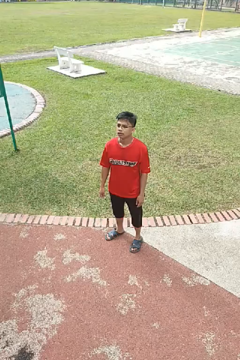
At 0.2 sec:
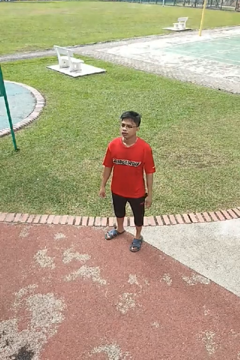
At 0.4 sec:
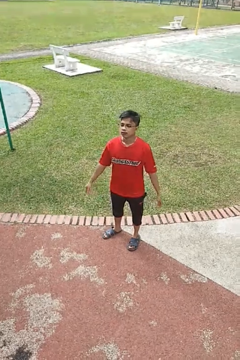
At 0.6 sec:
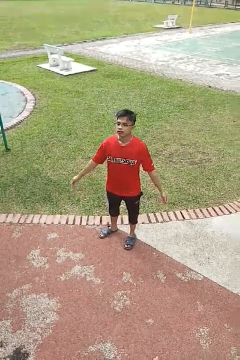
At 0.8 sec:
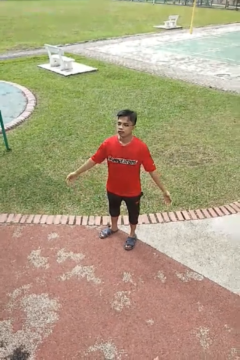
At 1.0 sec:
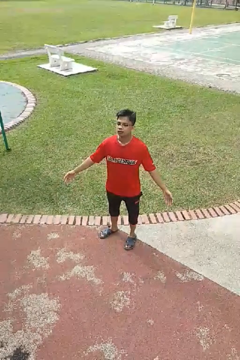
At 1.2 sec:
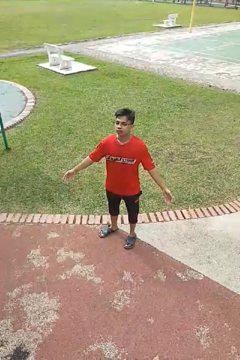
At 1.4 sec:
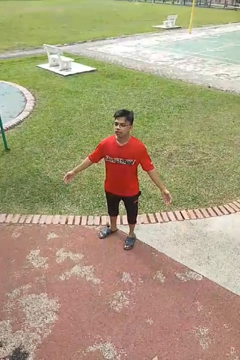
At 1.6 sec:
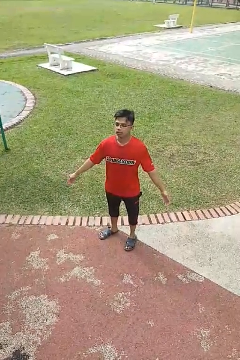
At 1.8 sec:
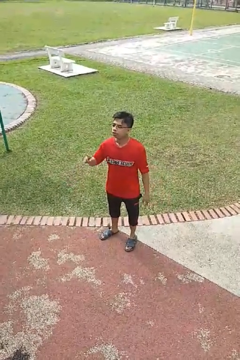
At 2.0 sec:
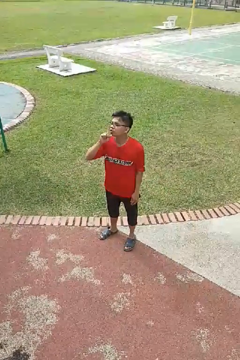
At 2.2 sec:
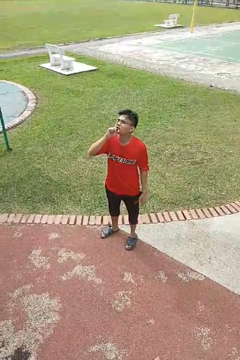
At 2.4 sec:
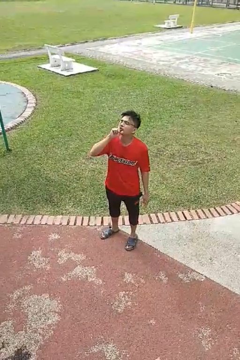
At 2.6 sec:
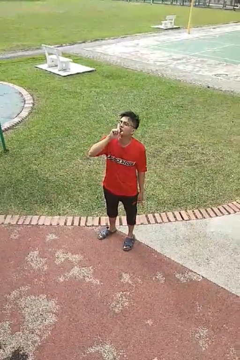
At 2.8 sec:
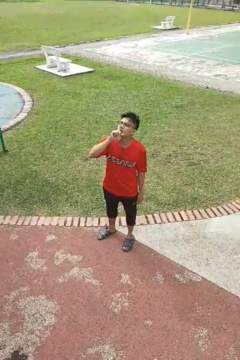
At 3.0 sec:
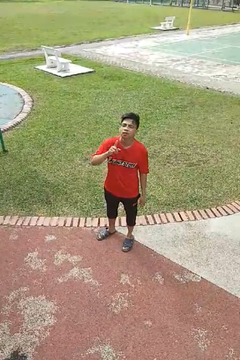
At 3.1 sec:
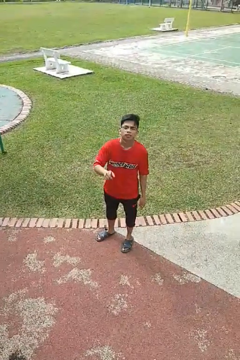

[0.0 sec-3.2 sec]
person gestures be quiet

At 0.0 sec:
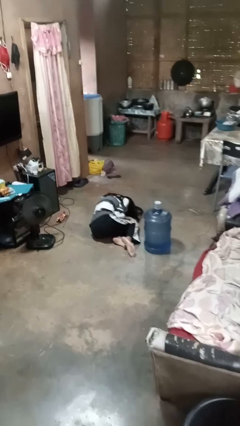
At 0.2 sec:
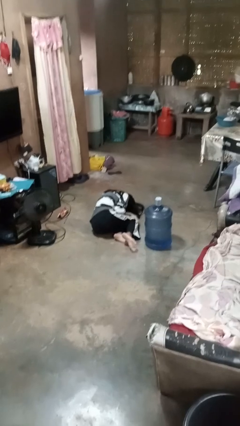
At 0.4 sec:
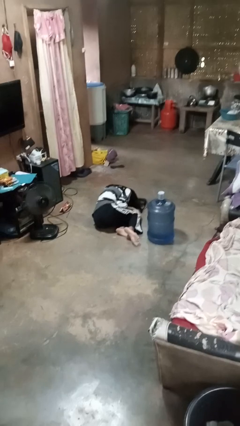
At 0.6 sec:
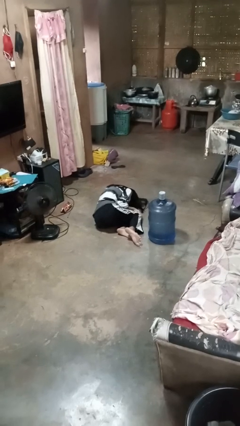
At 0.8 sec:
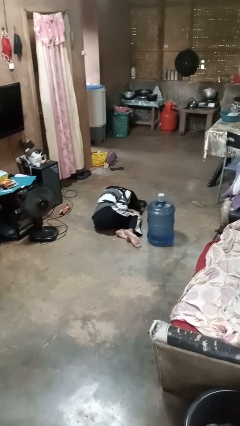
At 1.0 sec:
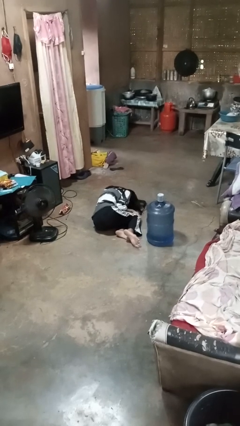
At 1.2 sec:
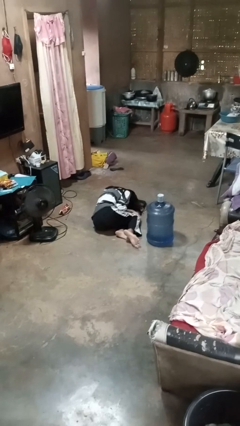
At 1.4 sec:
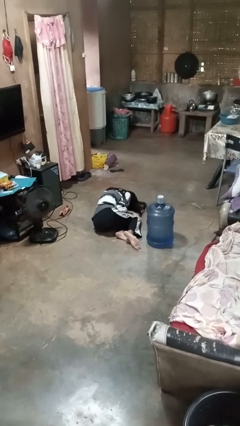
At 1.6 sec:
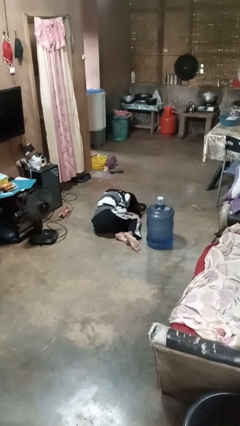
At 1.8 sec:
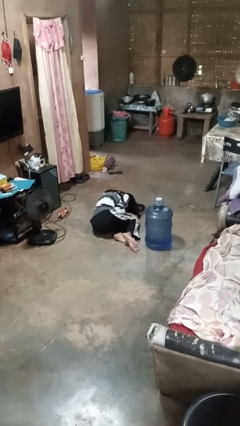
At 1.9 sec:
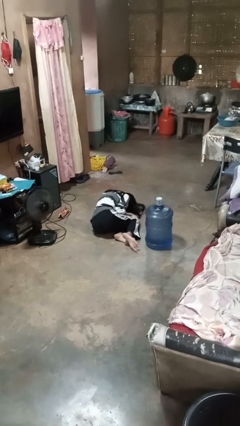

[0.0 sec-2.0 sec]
person lies down on floor

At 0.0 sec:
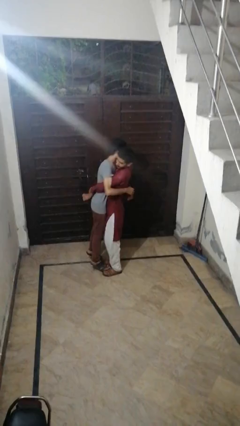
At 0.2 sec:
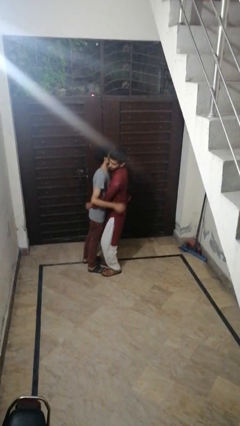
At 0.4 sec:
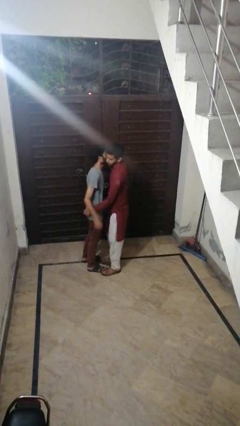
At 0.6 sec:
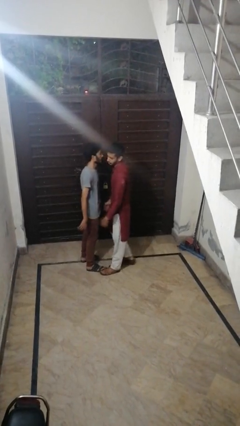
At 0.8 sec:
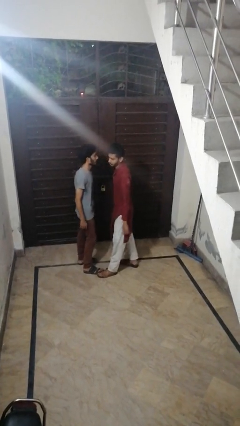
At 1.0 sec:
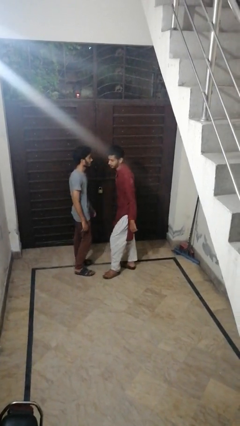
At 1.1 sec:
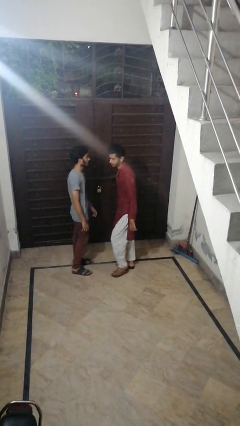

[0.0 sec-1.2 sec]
person puts down person

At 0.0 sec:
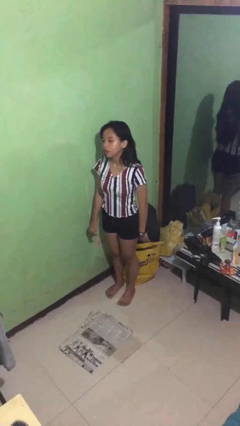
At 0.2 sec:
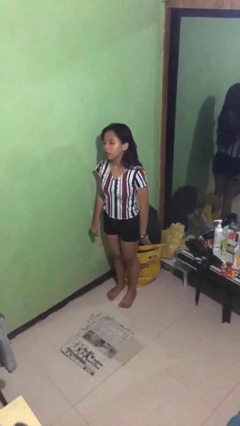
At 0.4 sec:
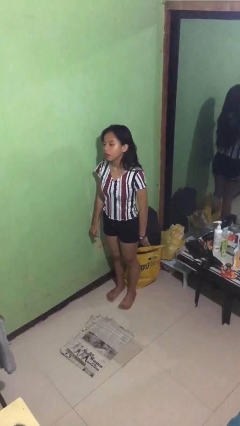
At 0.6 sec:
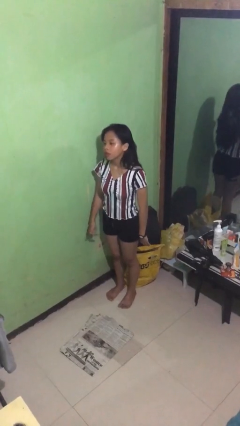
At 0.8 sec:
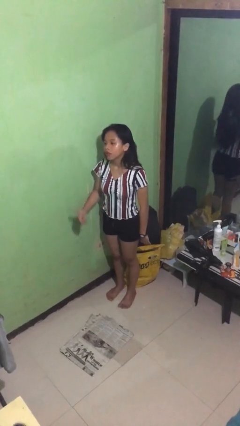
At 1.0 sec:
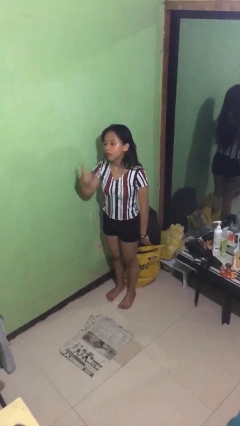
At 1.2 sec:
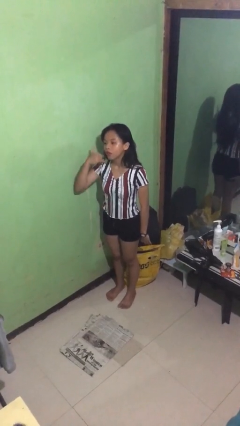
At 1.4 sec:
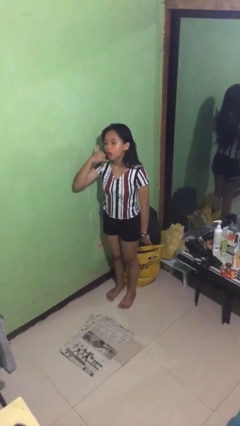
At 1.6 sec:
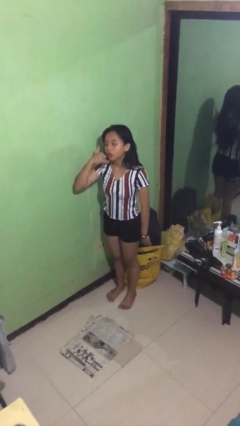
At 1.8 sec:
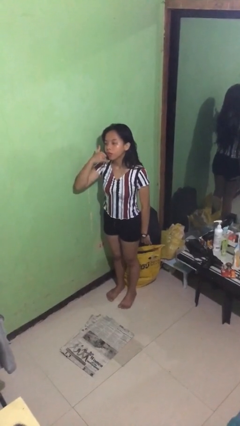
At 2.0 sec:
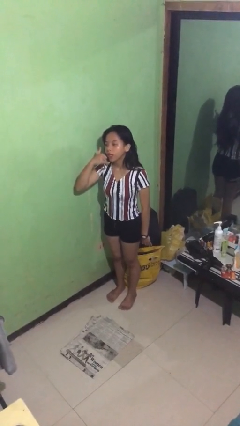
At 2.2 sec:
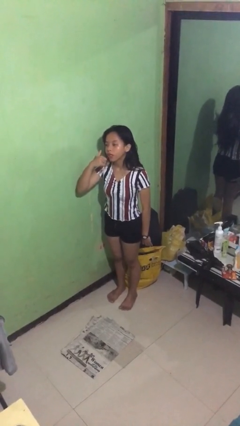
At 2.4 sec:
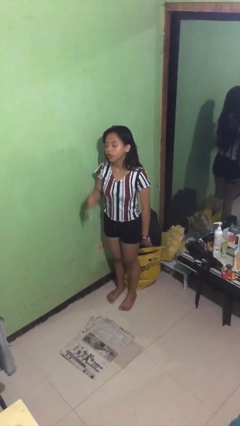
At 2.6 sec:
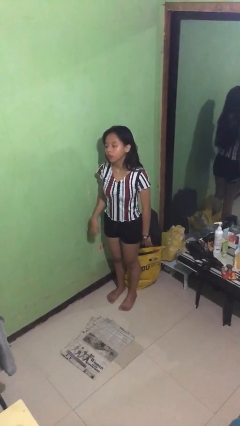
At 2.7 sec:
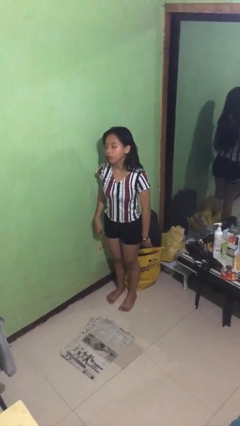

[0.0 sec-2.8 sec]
person gestures call me

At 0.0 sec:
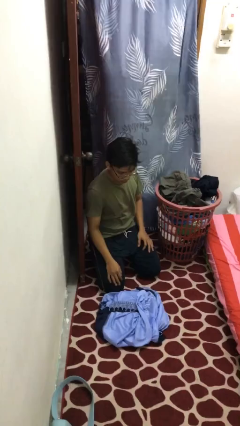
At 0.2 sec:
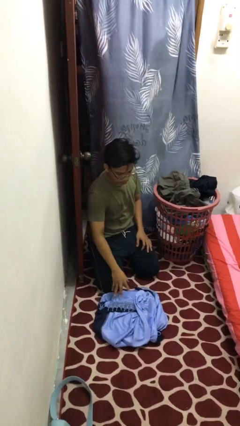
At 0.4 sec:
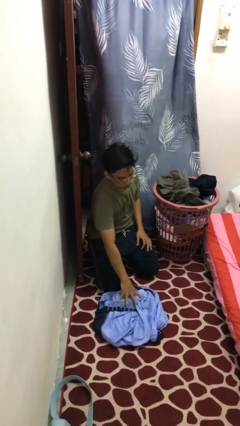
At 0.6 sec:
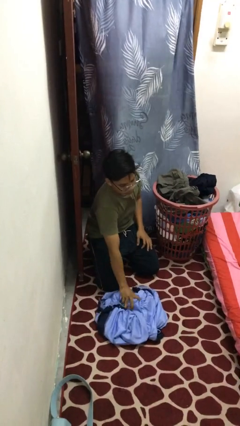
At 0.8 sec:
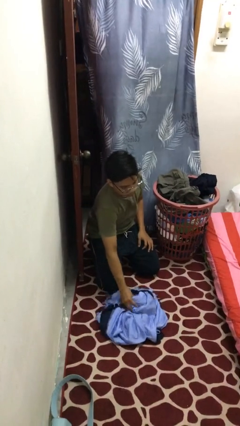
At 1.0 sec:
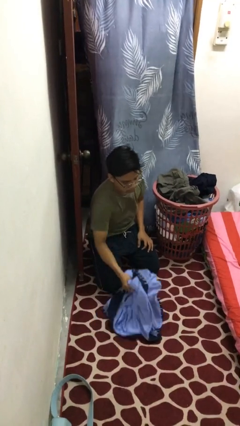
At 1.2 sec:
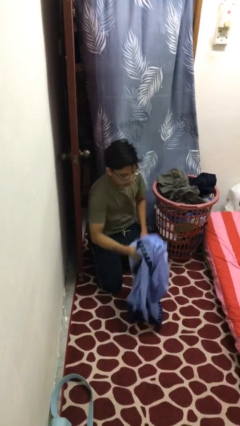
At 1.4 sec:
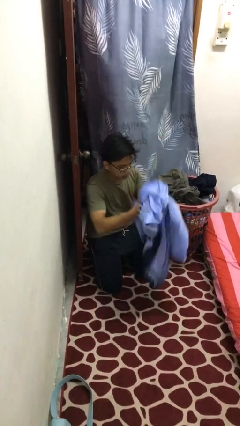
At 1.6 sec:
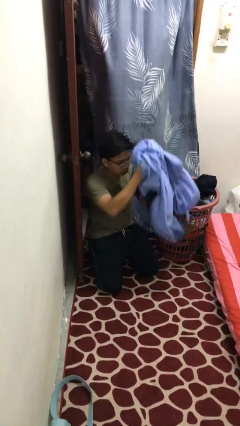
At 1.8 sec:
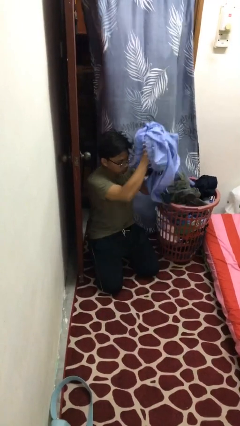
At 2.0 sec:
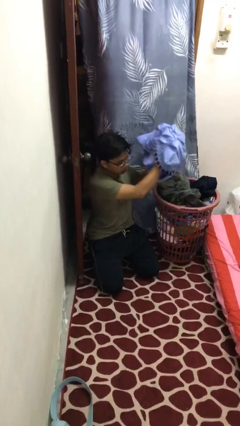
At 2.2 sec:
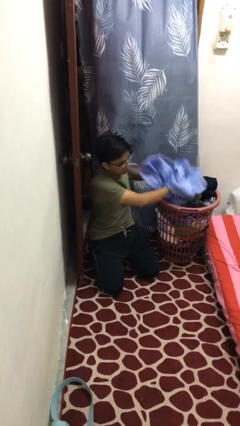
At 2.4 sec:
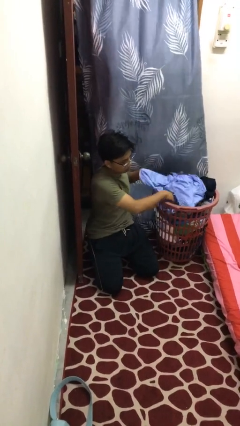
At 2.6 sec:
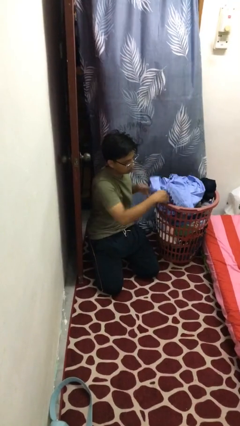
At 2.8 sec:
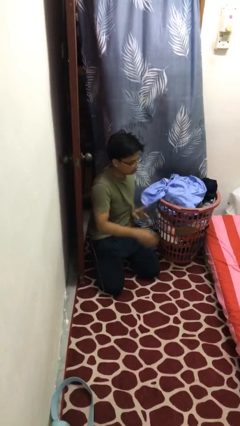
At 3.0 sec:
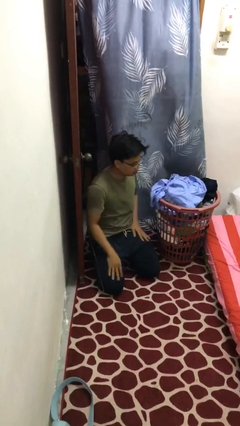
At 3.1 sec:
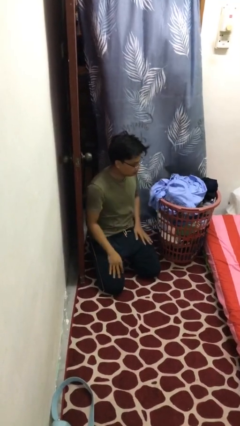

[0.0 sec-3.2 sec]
person puts object into basket

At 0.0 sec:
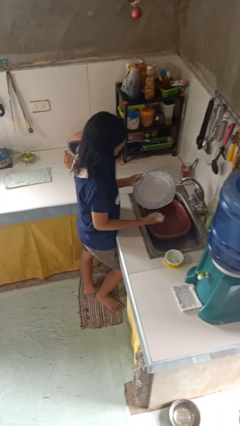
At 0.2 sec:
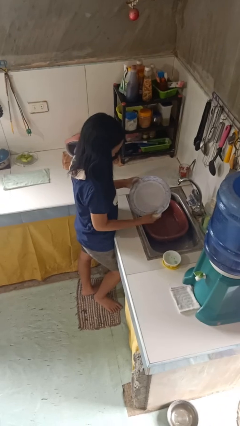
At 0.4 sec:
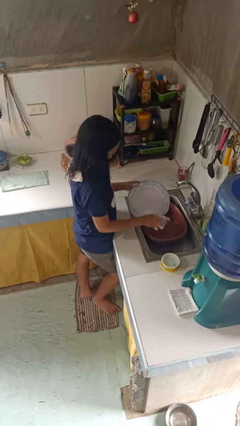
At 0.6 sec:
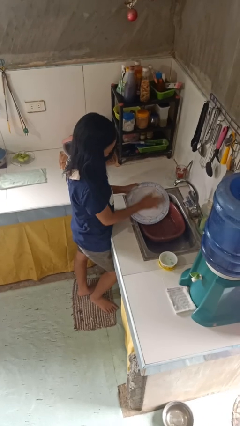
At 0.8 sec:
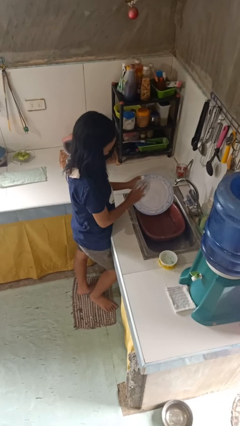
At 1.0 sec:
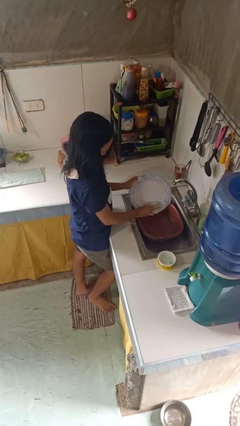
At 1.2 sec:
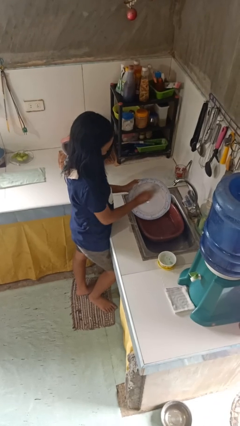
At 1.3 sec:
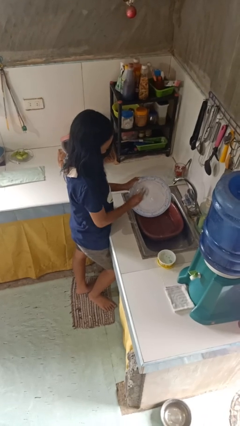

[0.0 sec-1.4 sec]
person washes dish

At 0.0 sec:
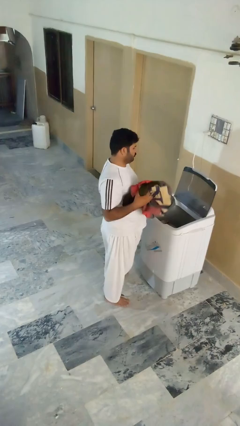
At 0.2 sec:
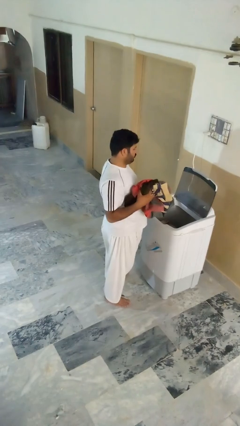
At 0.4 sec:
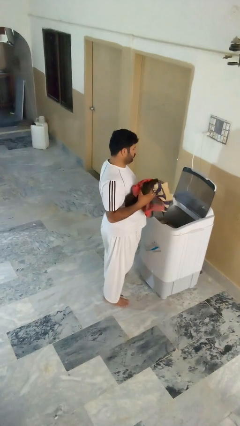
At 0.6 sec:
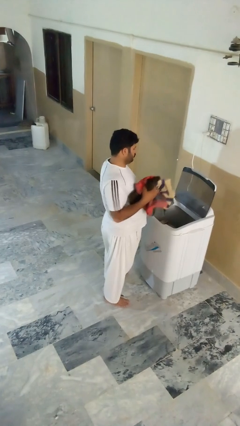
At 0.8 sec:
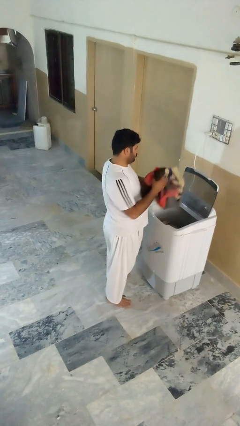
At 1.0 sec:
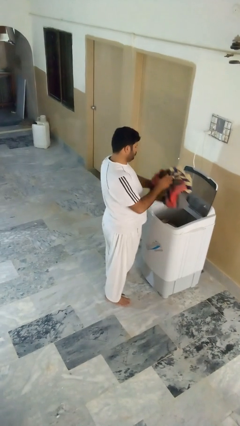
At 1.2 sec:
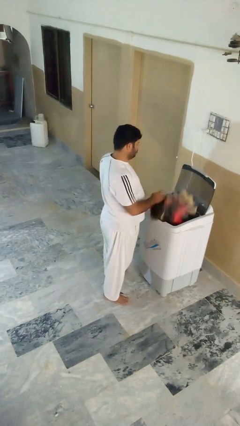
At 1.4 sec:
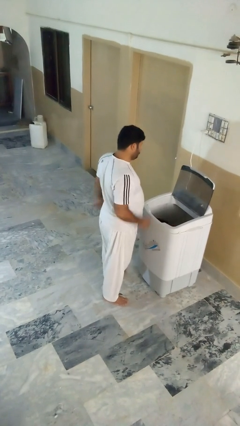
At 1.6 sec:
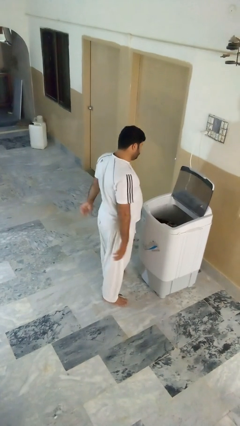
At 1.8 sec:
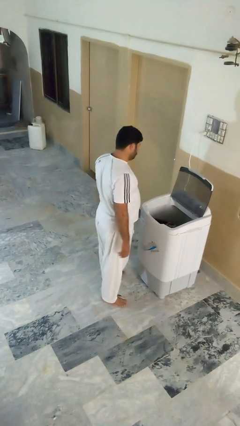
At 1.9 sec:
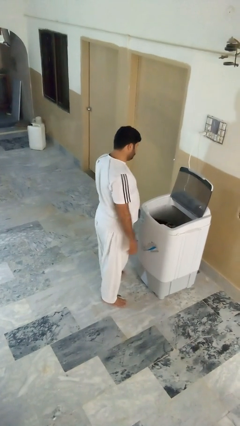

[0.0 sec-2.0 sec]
person loads clotheswasher

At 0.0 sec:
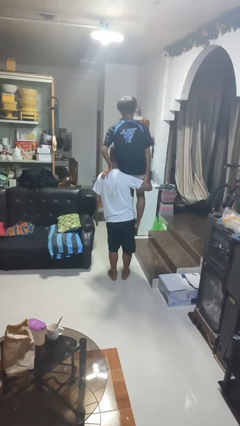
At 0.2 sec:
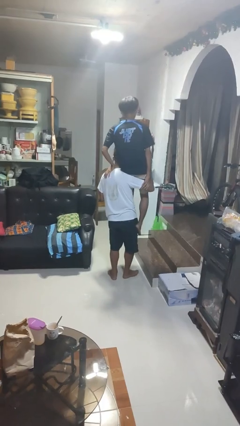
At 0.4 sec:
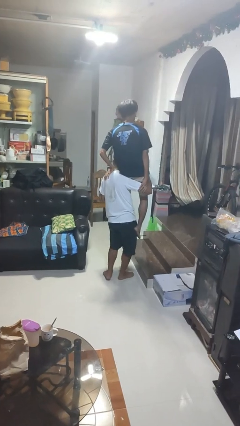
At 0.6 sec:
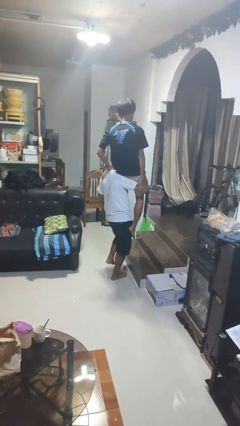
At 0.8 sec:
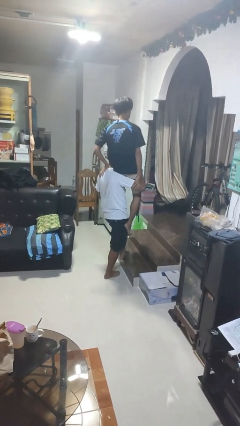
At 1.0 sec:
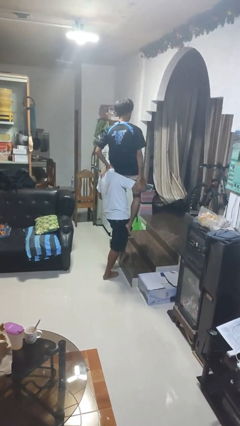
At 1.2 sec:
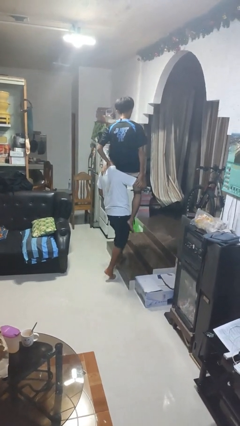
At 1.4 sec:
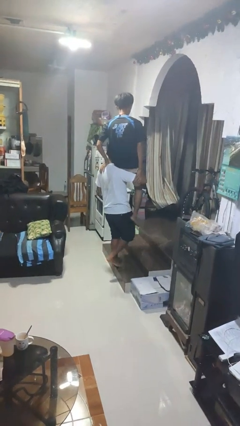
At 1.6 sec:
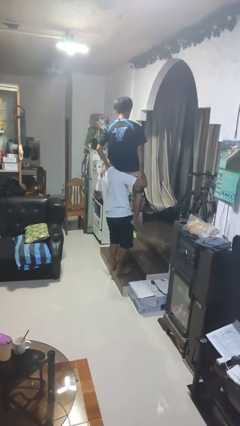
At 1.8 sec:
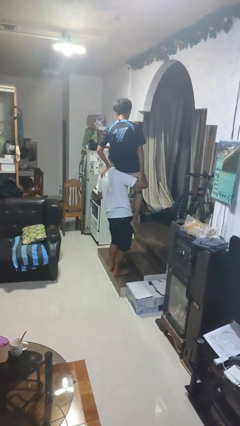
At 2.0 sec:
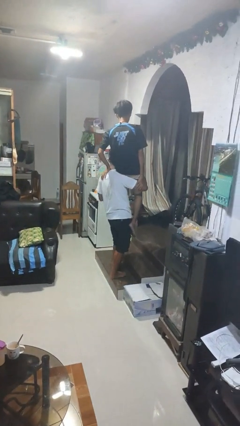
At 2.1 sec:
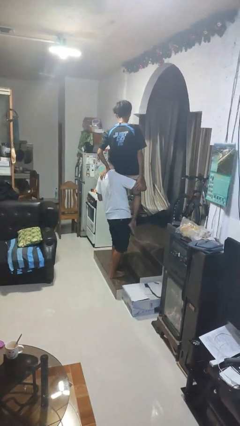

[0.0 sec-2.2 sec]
person carries person on shoulders
